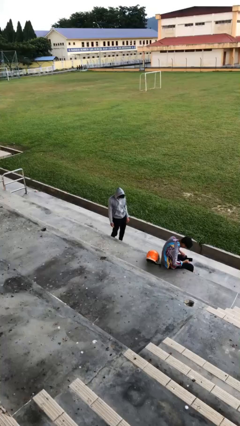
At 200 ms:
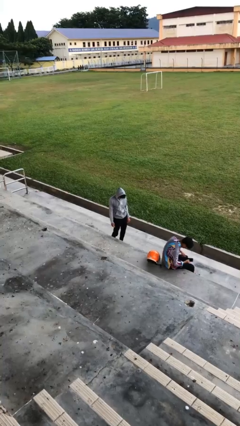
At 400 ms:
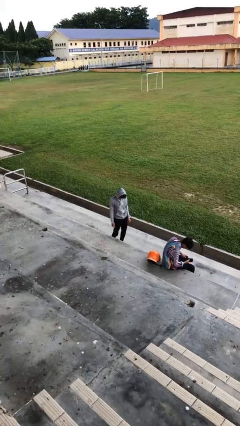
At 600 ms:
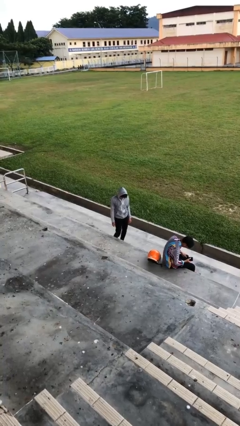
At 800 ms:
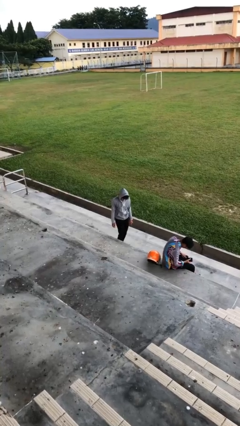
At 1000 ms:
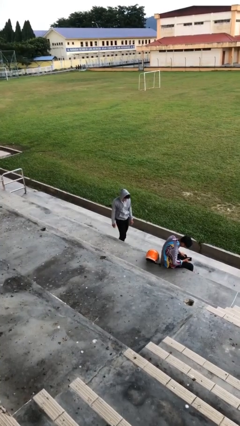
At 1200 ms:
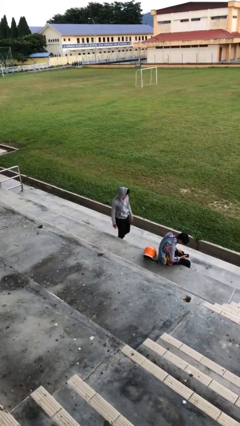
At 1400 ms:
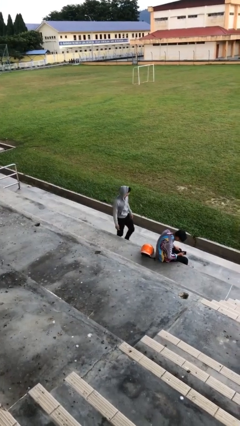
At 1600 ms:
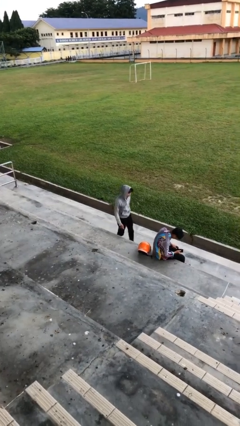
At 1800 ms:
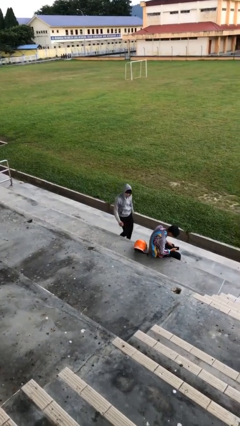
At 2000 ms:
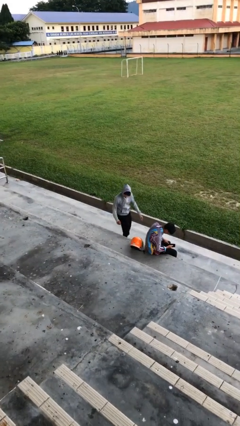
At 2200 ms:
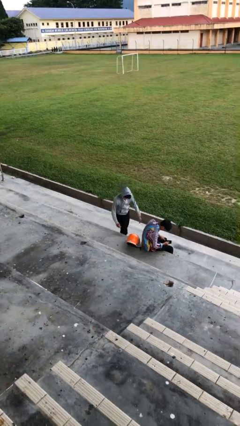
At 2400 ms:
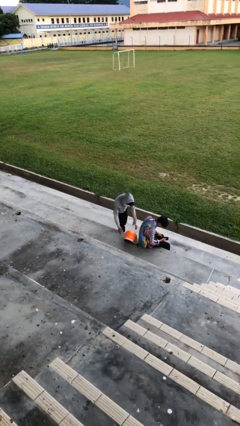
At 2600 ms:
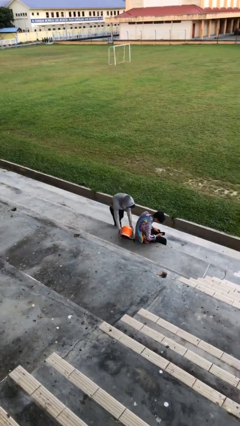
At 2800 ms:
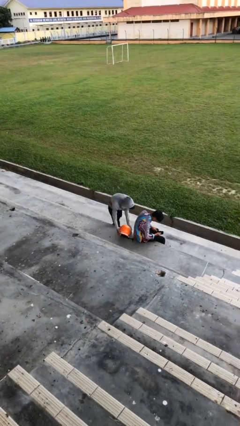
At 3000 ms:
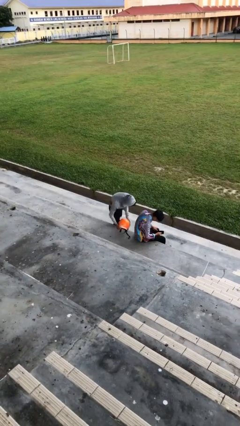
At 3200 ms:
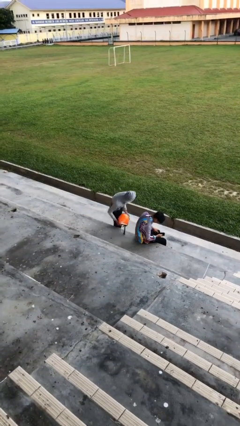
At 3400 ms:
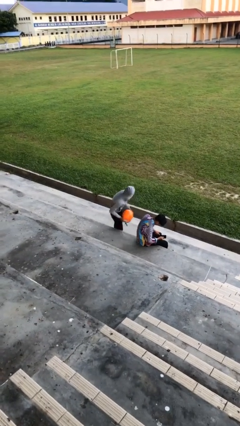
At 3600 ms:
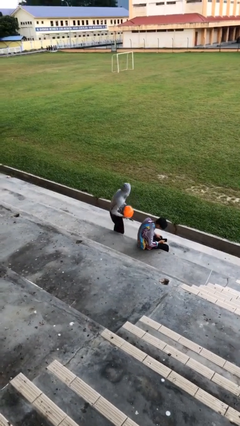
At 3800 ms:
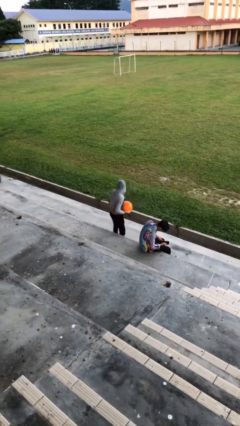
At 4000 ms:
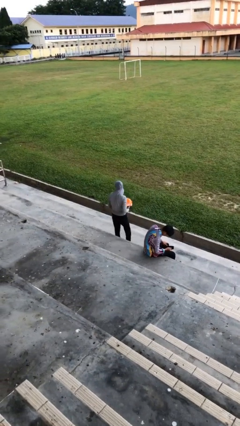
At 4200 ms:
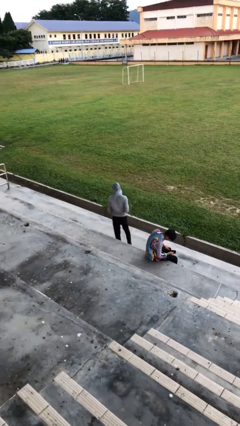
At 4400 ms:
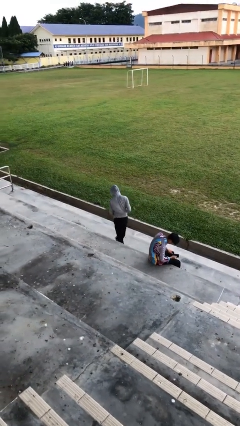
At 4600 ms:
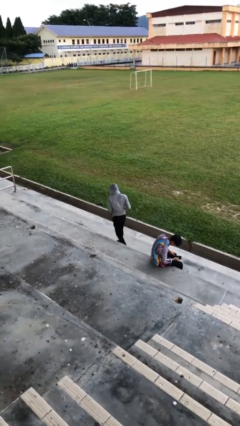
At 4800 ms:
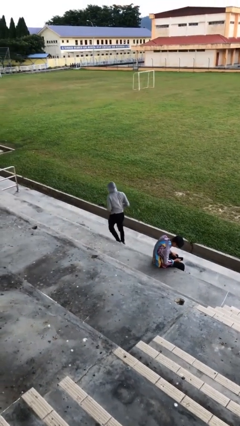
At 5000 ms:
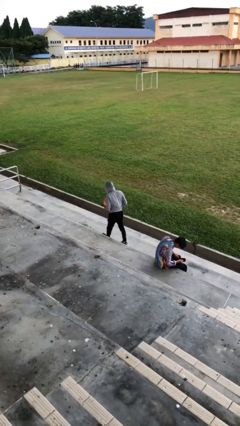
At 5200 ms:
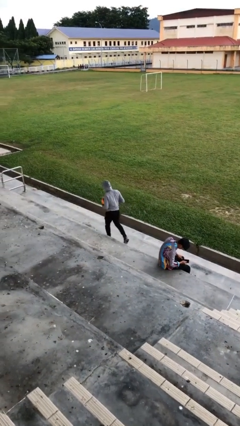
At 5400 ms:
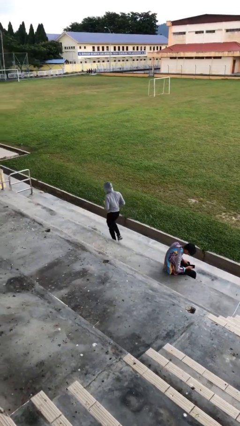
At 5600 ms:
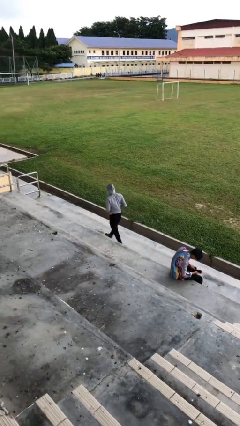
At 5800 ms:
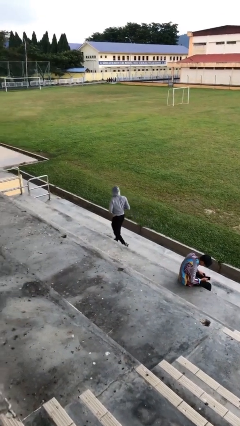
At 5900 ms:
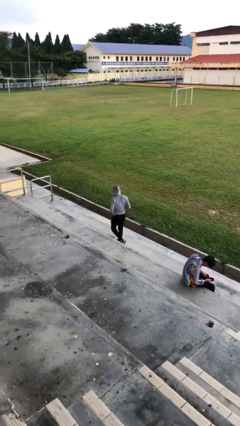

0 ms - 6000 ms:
person steals object from person

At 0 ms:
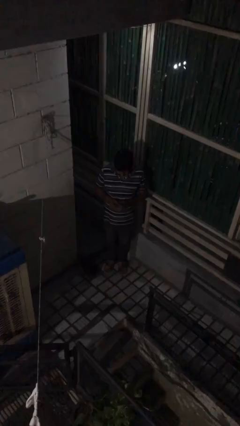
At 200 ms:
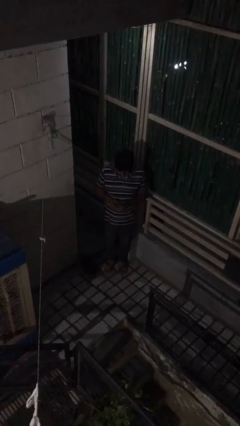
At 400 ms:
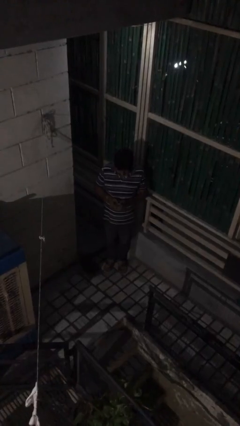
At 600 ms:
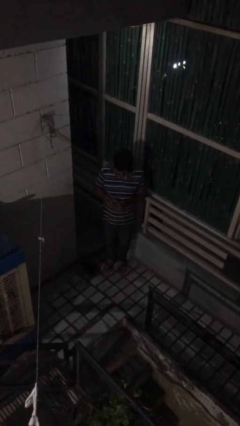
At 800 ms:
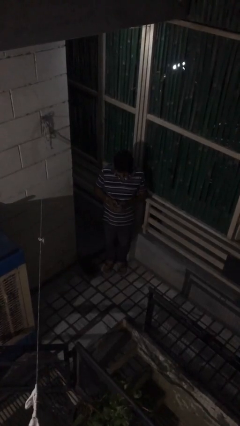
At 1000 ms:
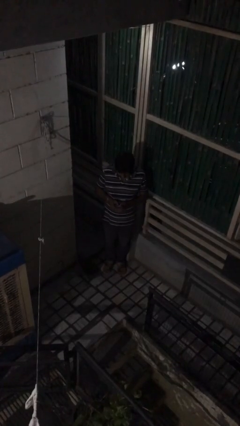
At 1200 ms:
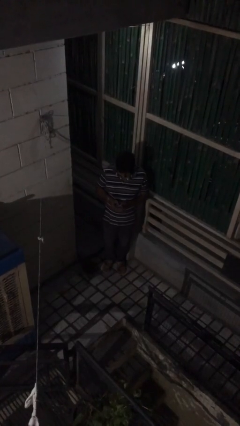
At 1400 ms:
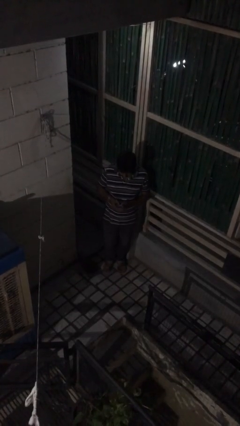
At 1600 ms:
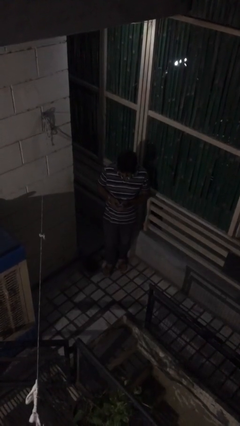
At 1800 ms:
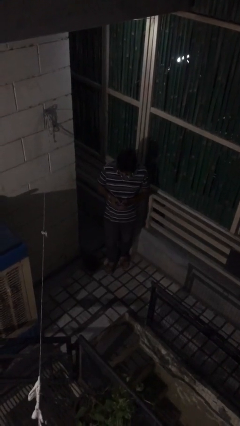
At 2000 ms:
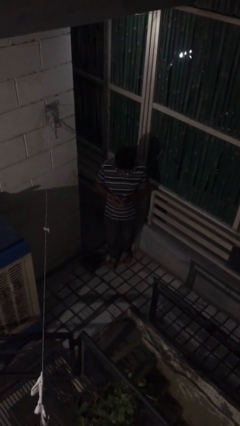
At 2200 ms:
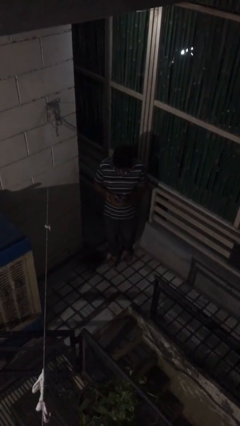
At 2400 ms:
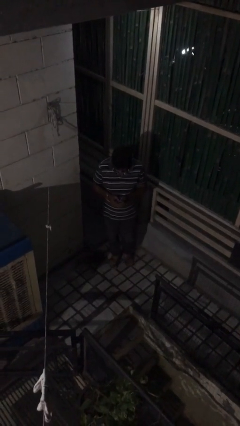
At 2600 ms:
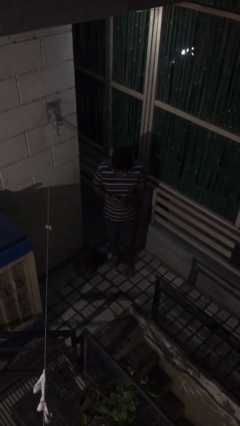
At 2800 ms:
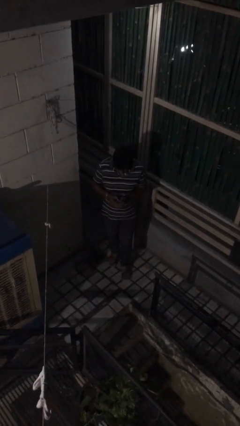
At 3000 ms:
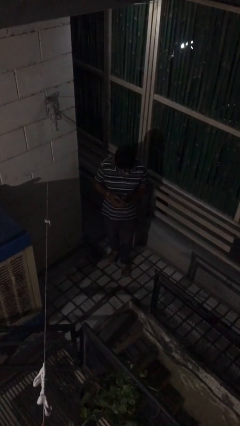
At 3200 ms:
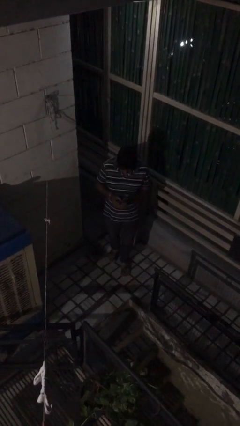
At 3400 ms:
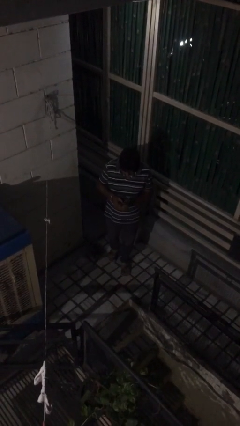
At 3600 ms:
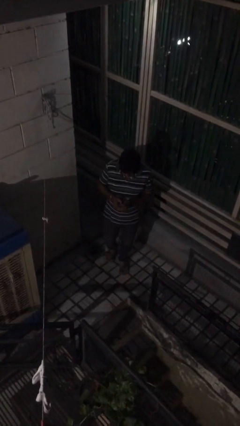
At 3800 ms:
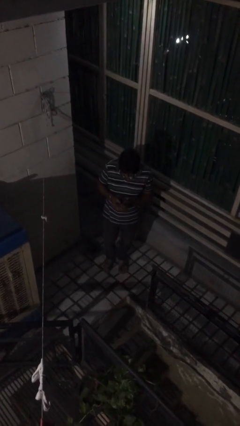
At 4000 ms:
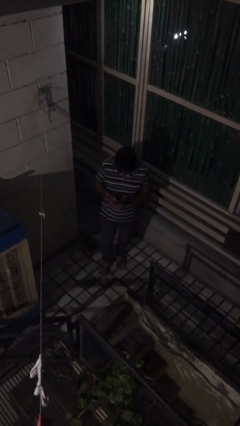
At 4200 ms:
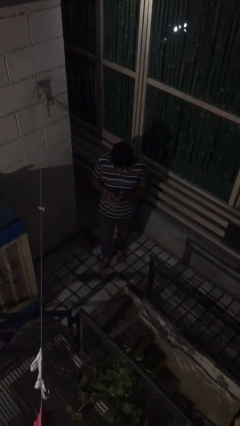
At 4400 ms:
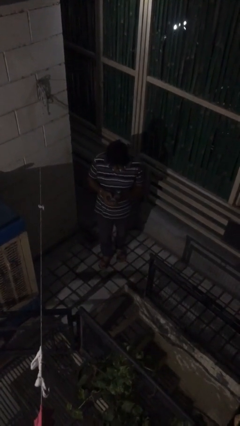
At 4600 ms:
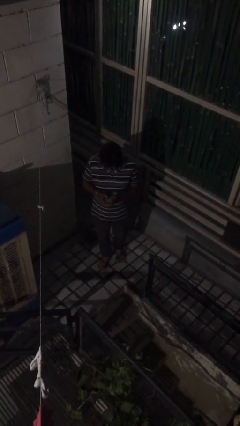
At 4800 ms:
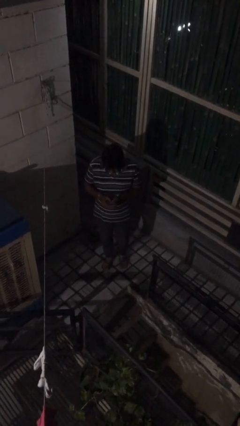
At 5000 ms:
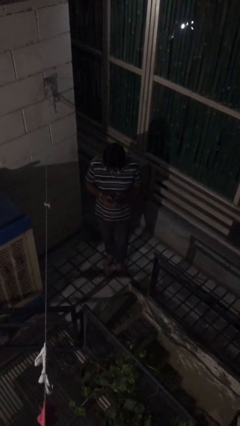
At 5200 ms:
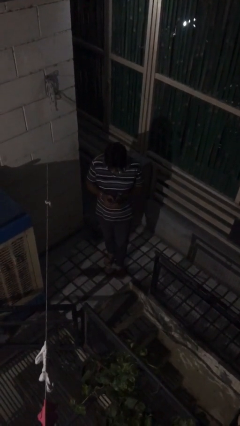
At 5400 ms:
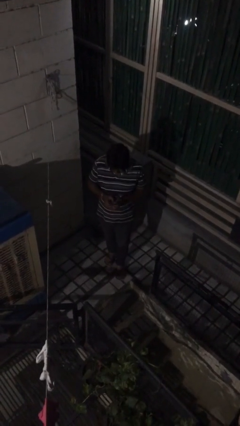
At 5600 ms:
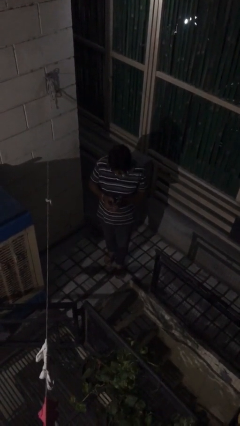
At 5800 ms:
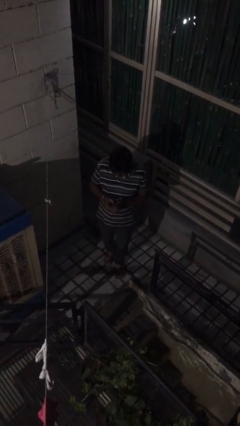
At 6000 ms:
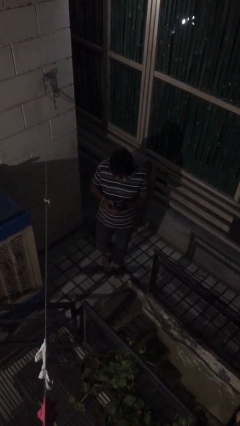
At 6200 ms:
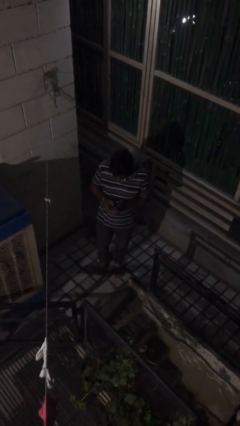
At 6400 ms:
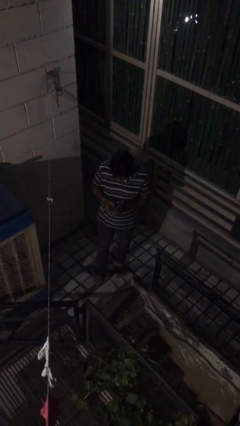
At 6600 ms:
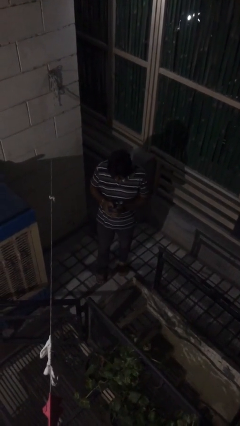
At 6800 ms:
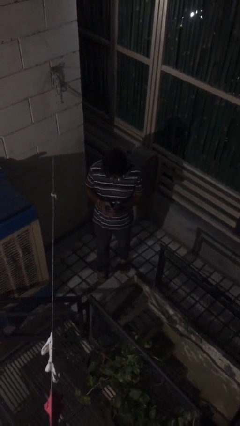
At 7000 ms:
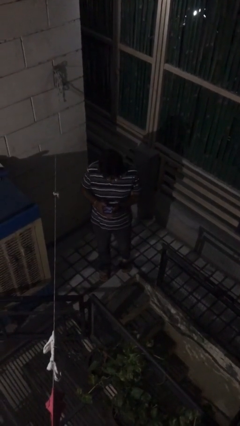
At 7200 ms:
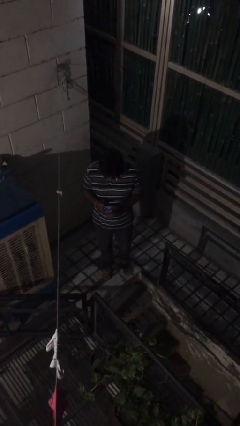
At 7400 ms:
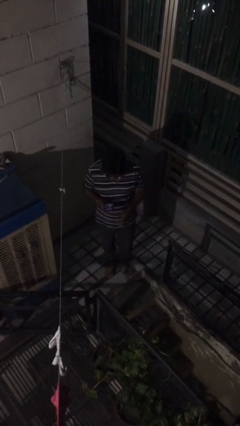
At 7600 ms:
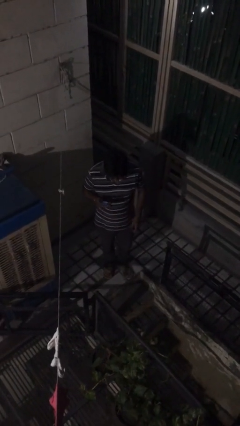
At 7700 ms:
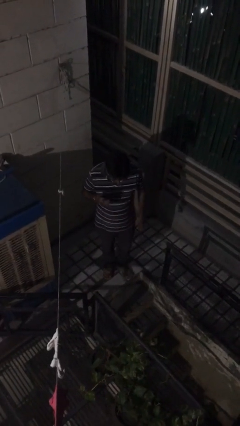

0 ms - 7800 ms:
person texts on phone

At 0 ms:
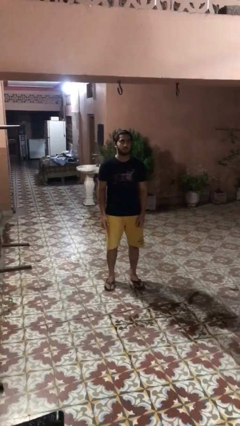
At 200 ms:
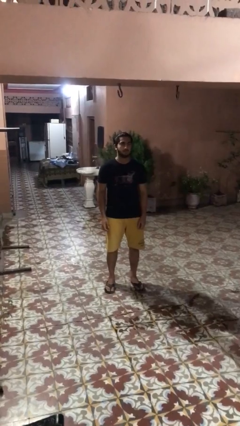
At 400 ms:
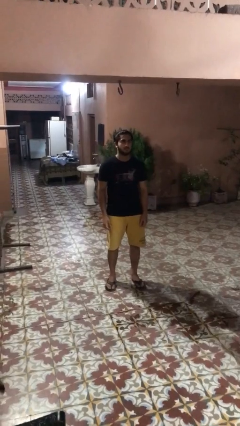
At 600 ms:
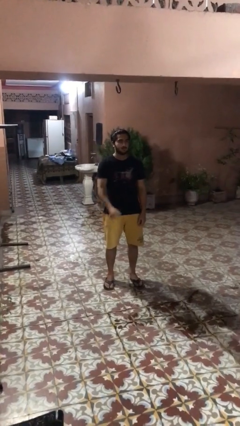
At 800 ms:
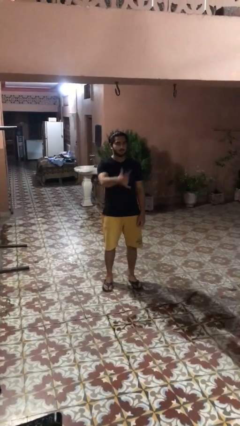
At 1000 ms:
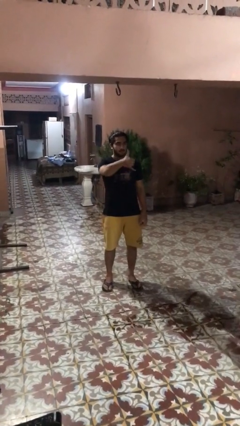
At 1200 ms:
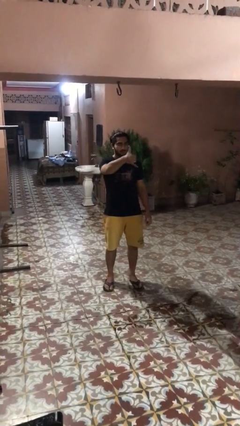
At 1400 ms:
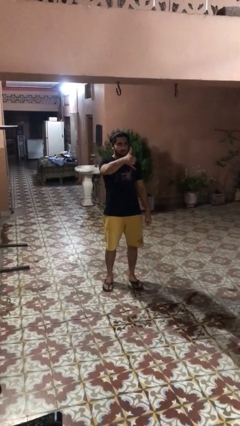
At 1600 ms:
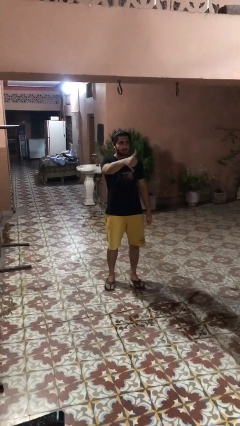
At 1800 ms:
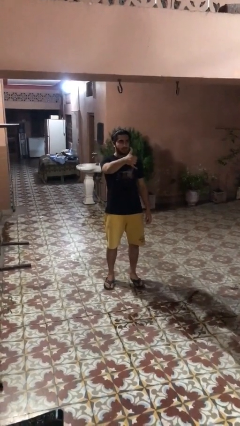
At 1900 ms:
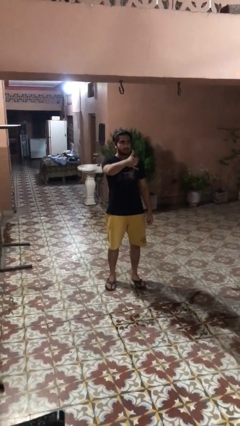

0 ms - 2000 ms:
person gestures hang loose

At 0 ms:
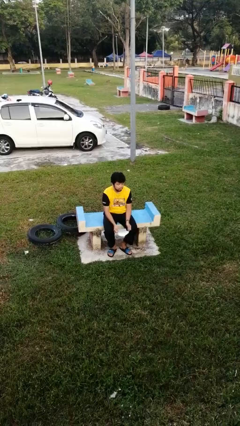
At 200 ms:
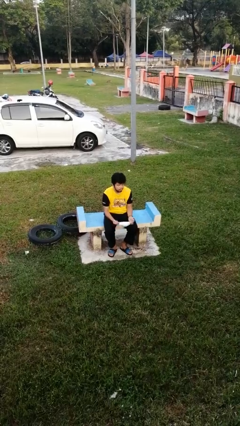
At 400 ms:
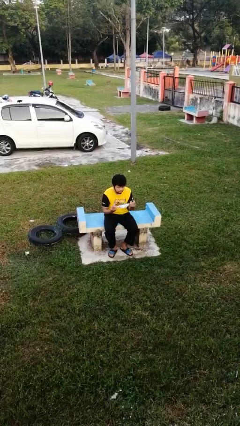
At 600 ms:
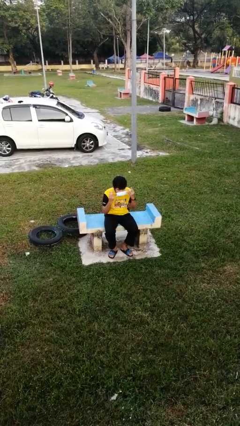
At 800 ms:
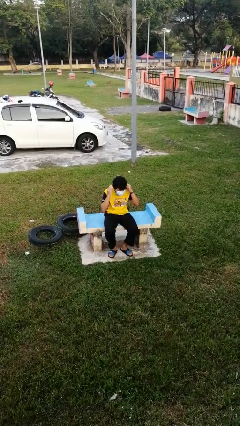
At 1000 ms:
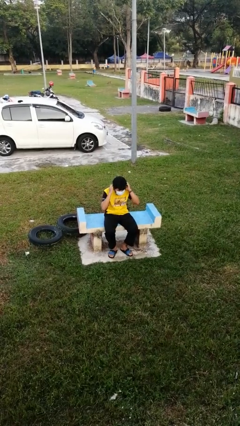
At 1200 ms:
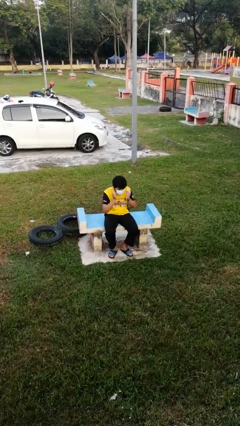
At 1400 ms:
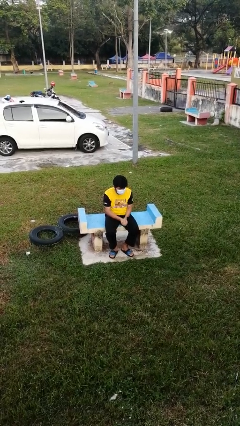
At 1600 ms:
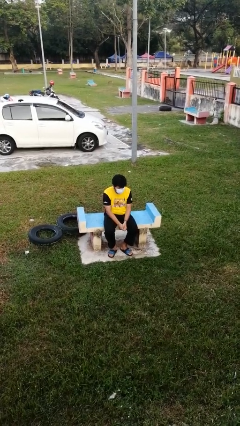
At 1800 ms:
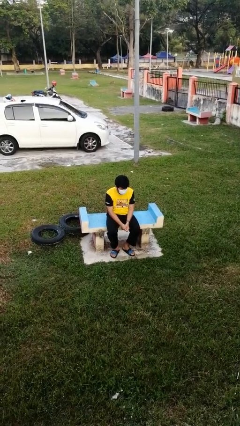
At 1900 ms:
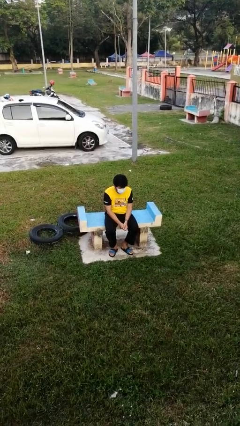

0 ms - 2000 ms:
person puts on facemask
